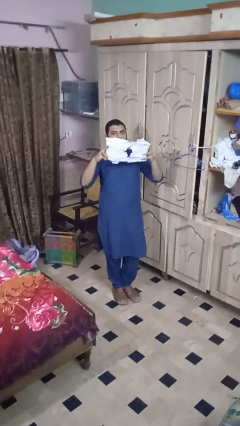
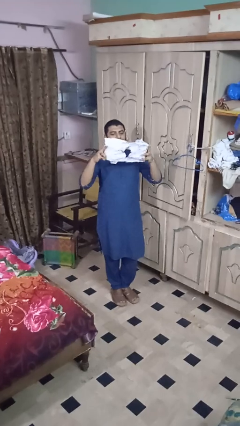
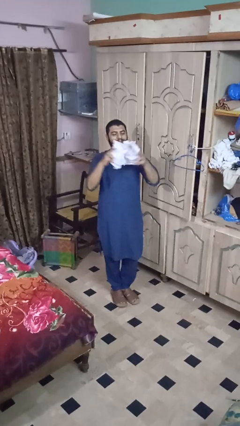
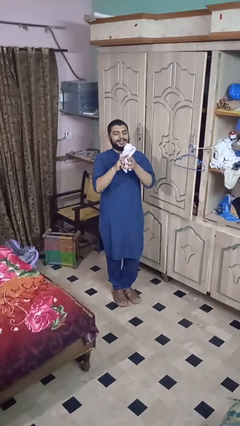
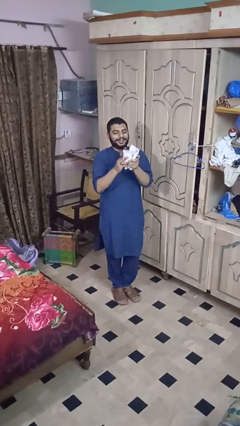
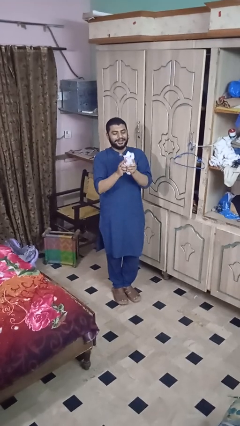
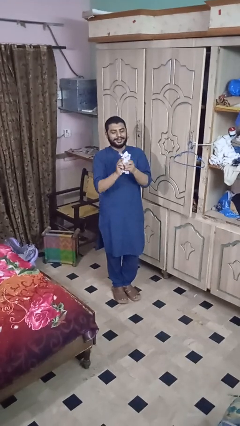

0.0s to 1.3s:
person crumples paper

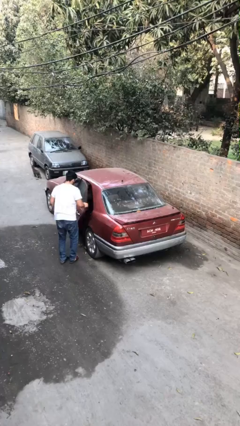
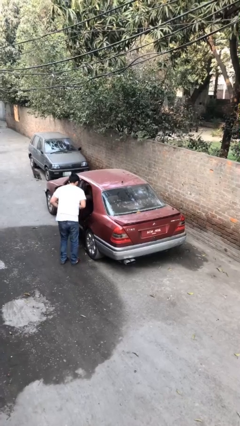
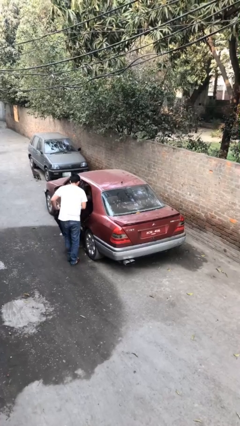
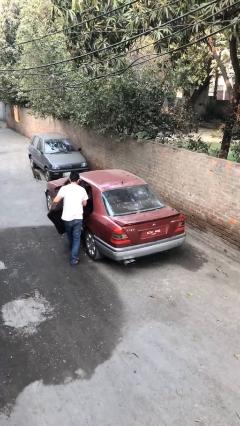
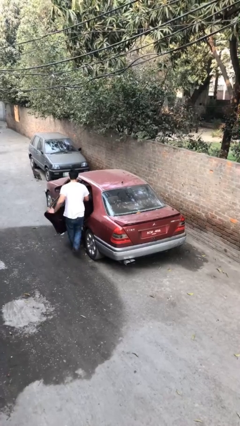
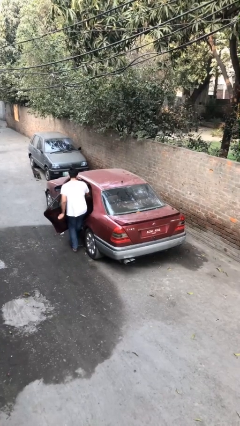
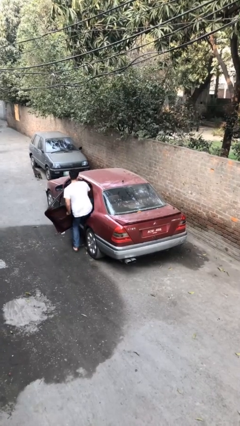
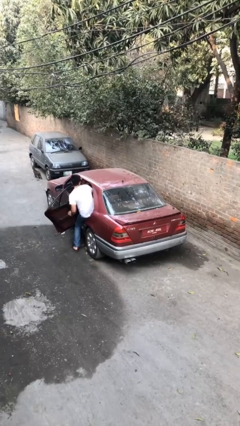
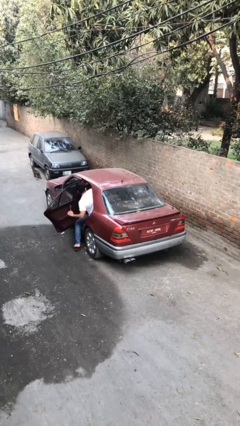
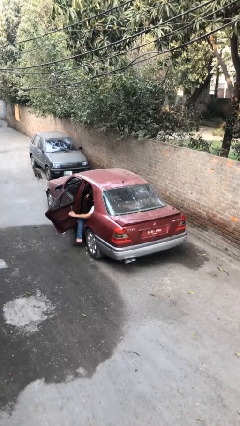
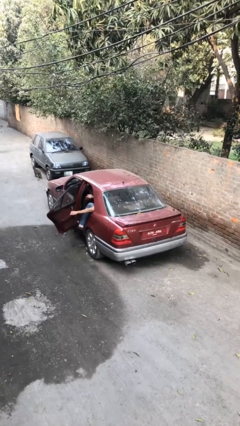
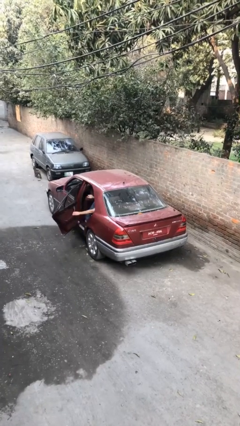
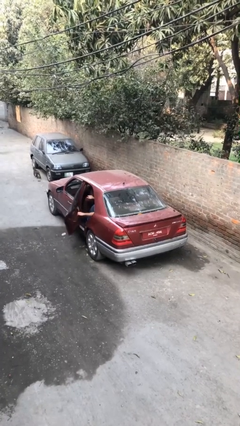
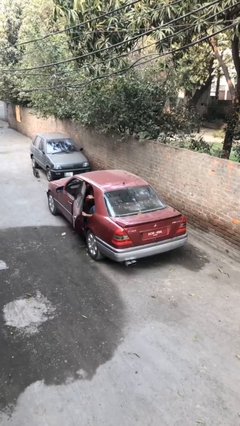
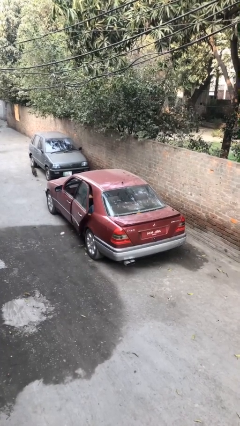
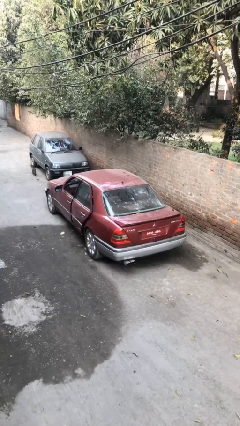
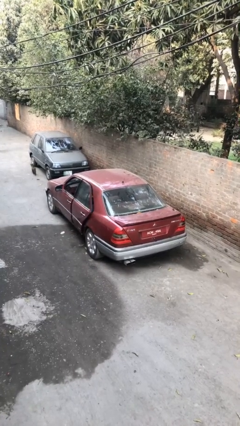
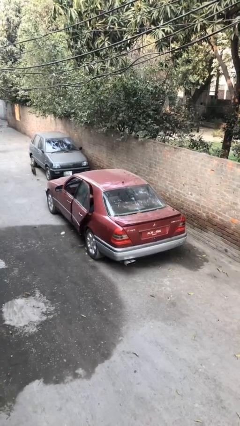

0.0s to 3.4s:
car picks up person

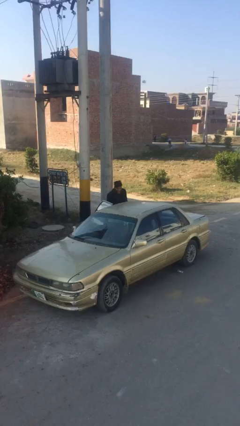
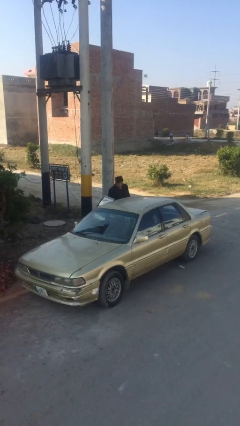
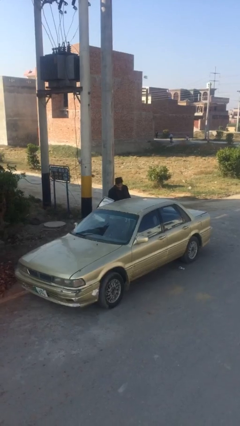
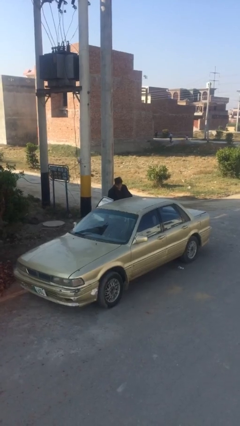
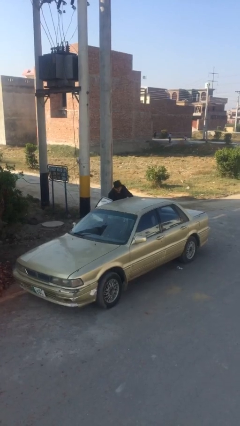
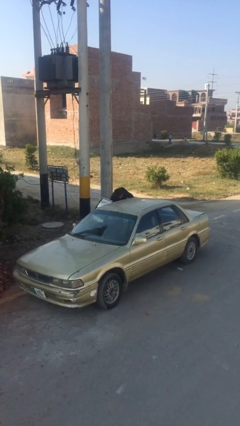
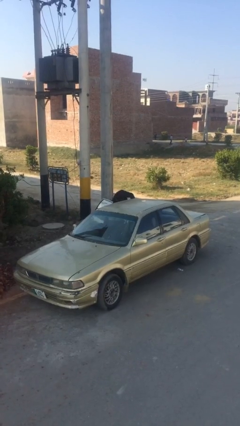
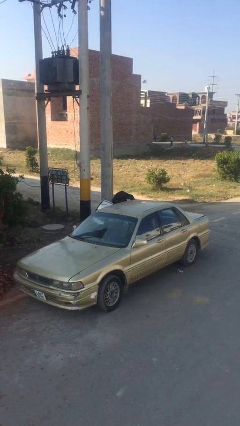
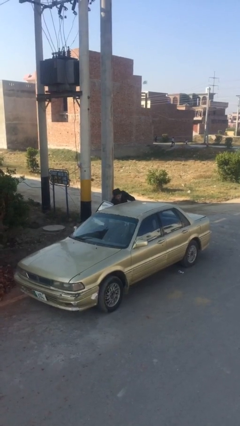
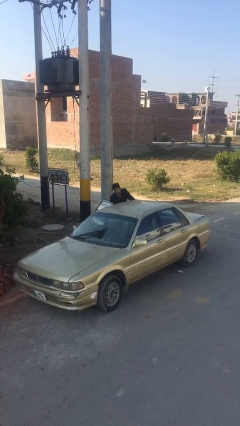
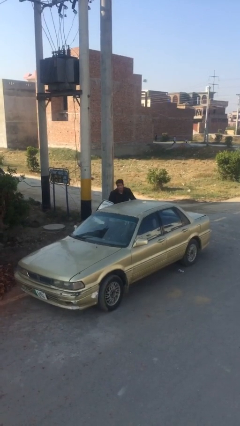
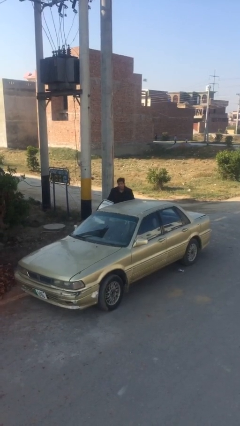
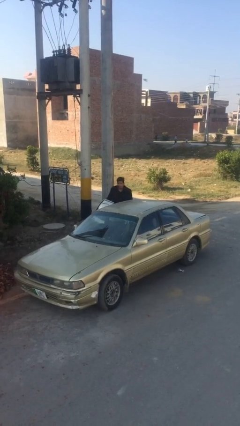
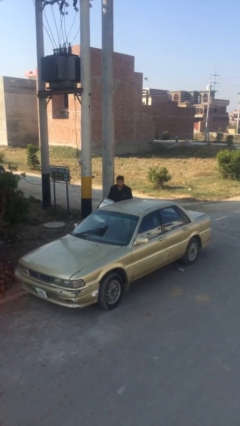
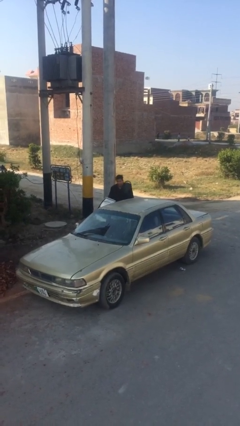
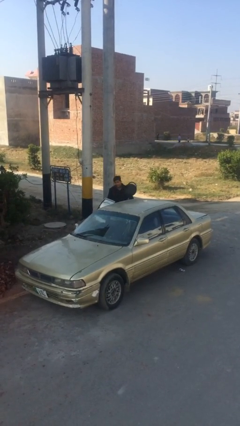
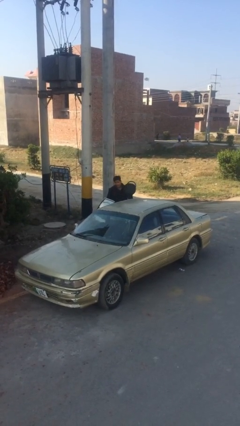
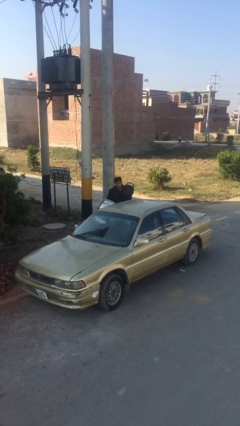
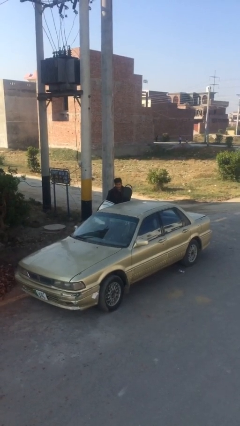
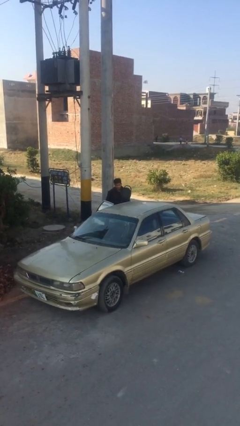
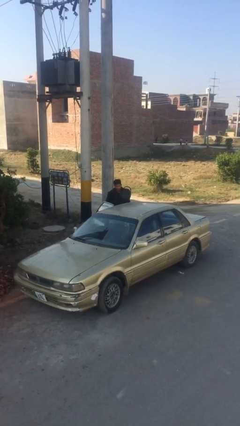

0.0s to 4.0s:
person unloads car

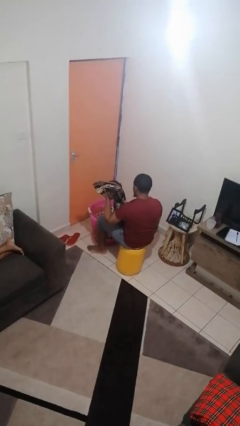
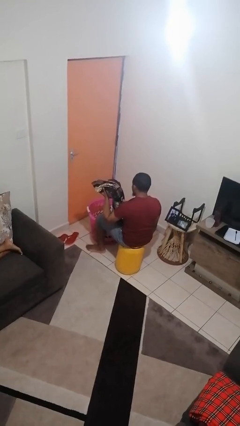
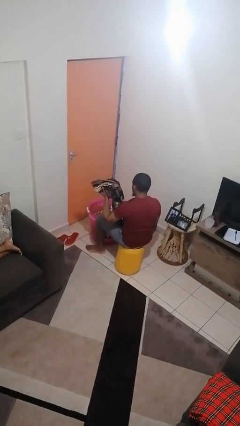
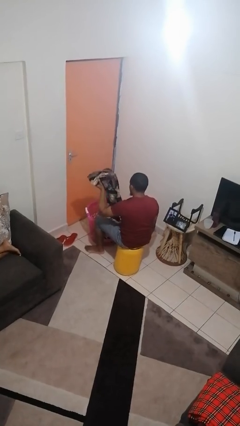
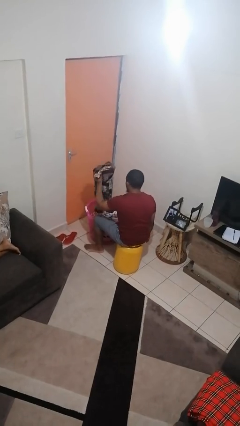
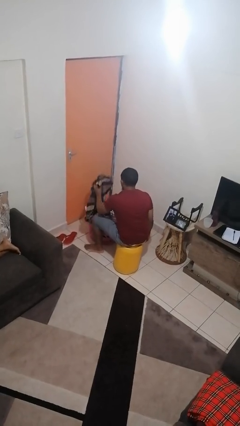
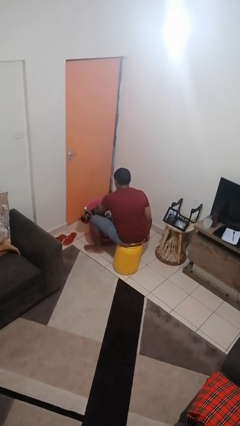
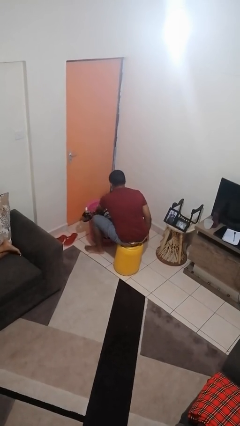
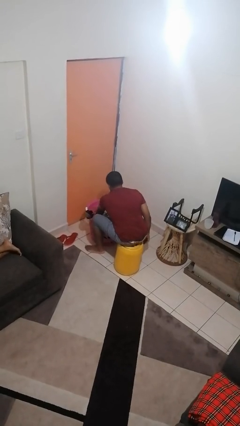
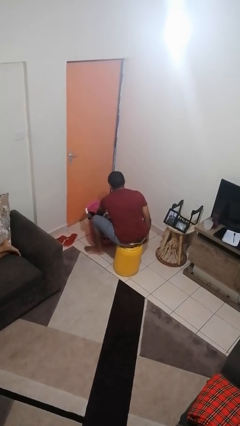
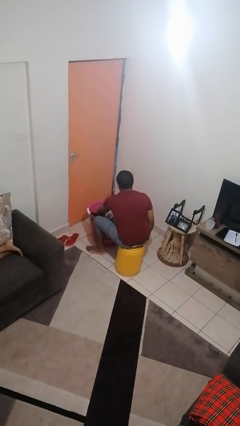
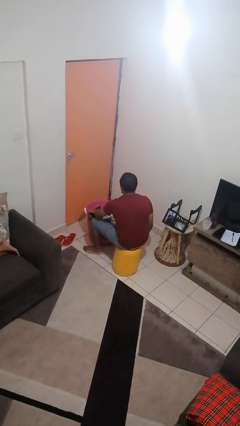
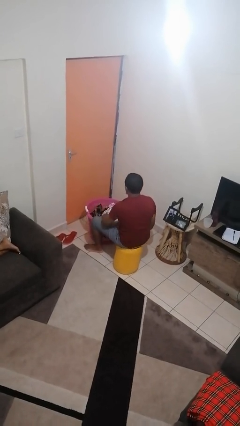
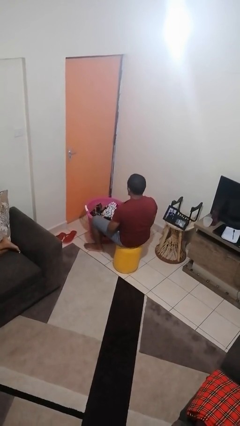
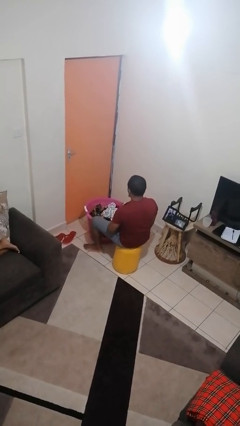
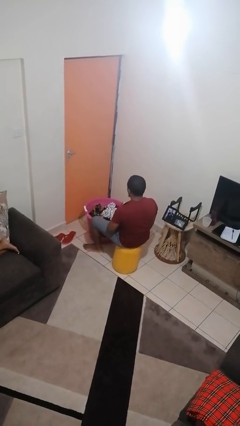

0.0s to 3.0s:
person puts object into basket

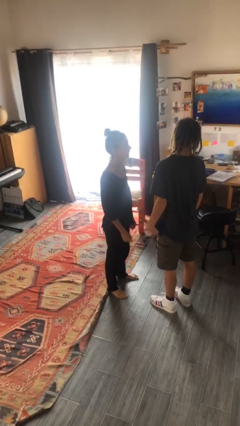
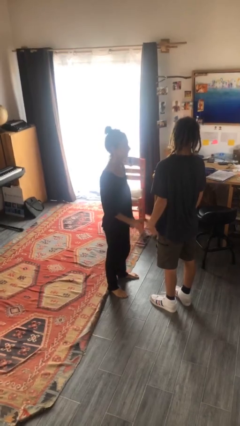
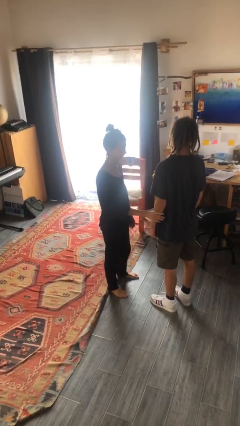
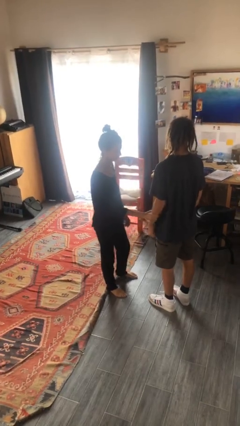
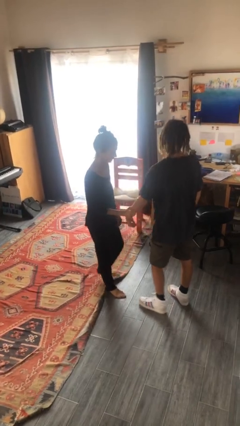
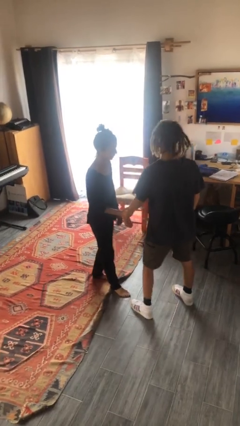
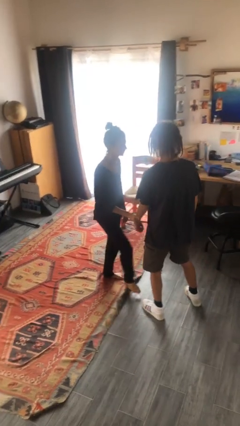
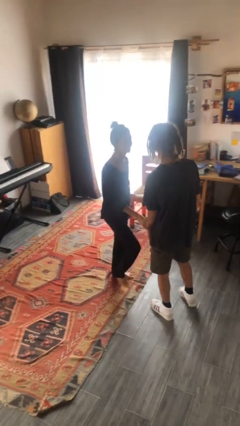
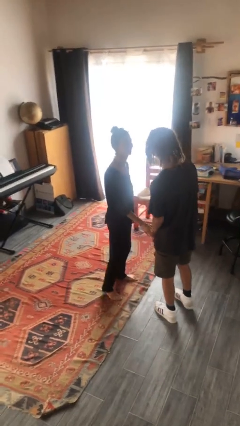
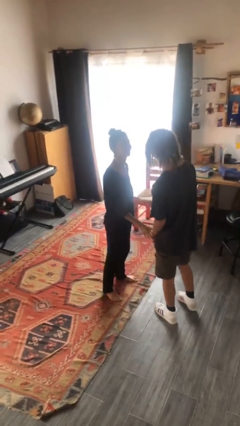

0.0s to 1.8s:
person grabs person by forearm

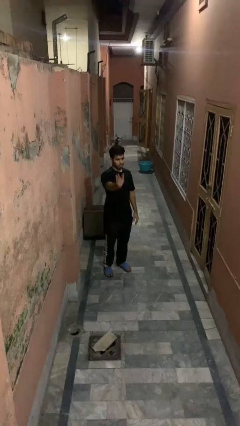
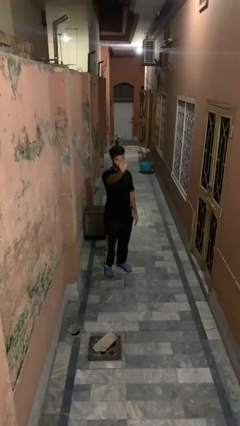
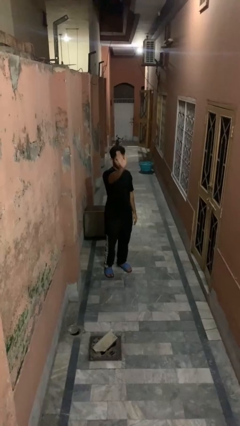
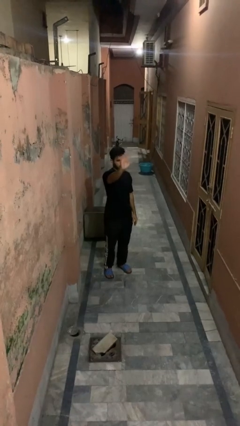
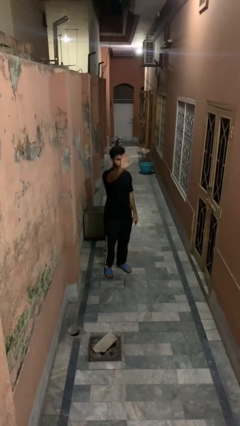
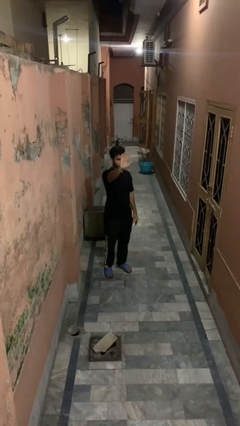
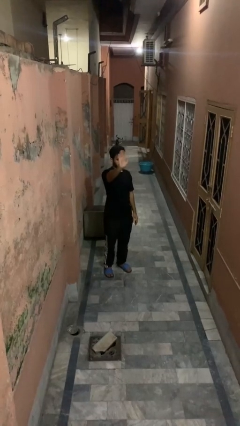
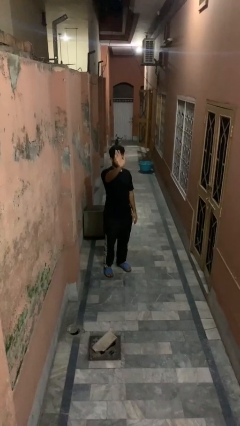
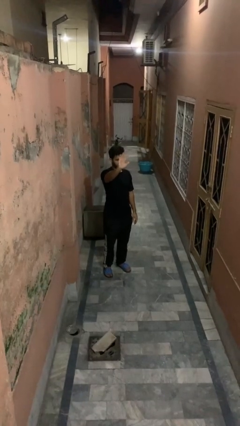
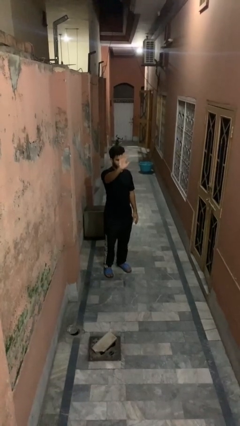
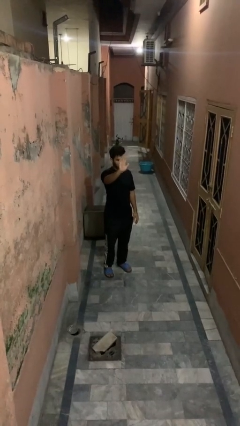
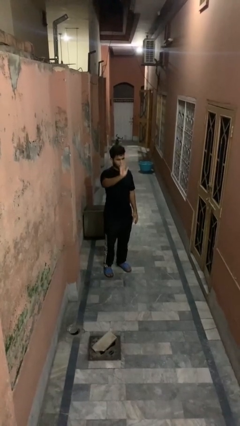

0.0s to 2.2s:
person waves at person

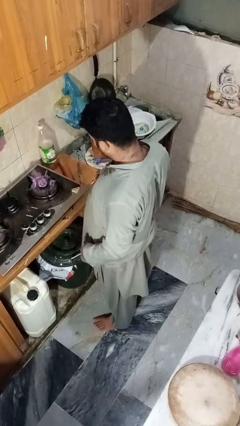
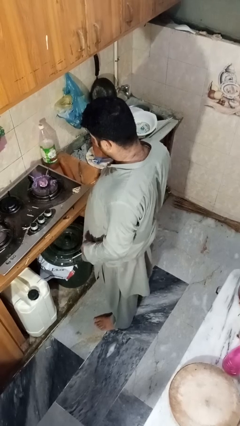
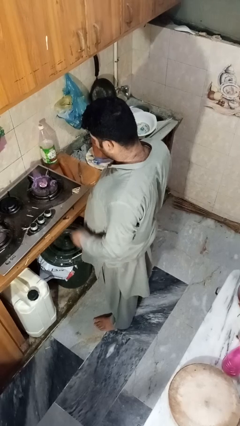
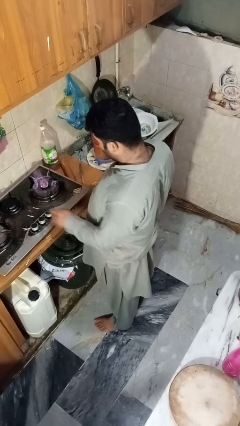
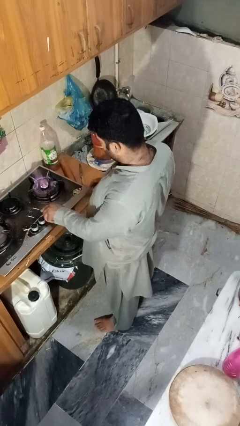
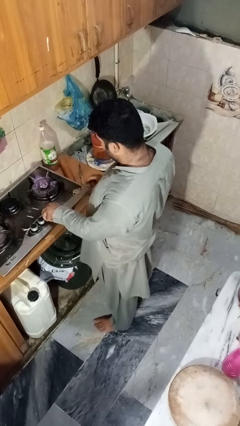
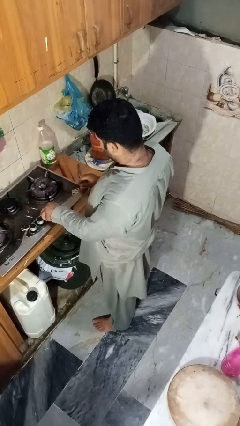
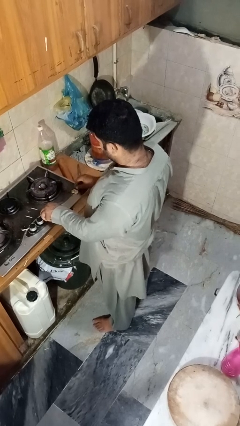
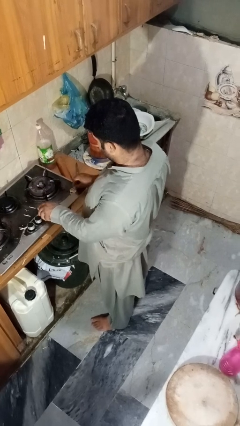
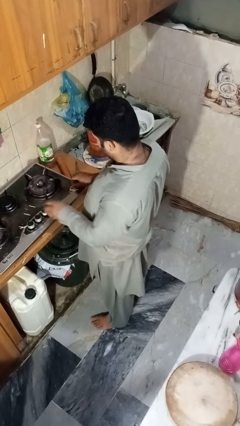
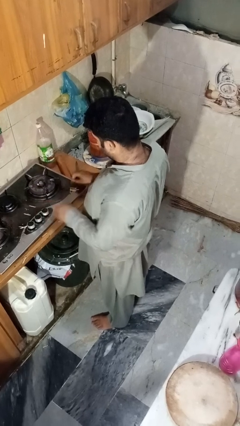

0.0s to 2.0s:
person turns off stovetop
